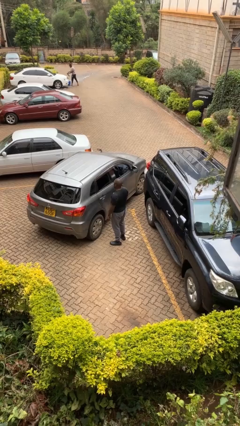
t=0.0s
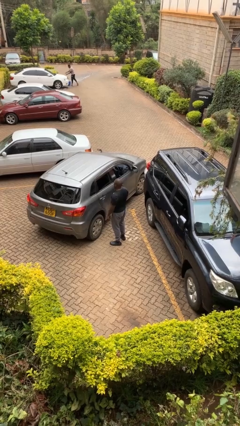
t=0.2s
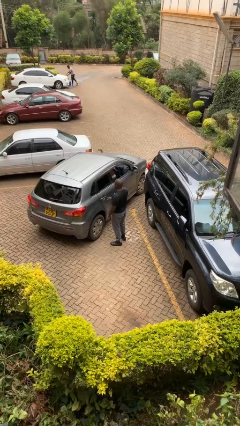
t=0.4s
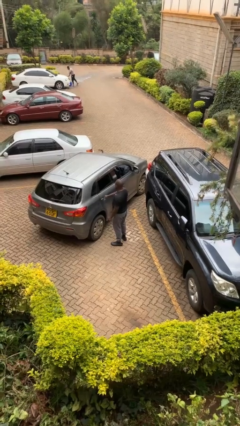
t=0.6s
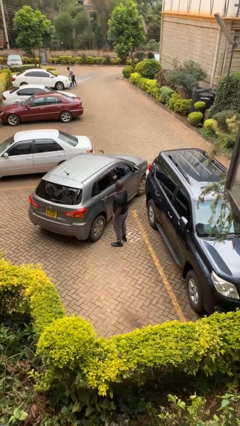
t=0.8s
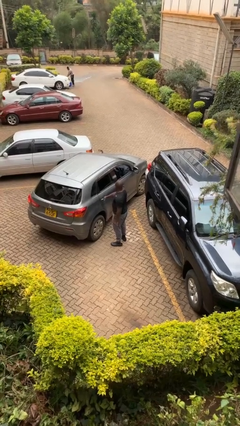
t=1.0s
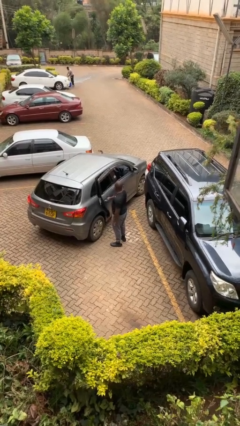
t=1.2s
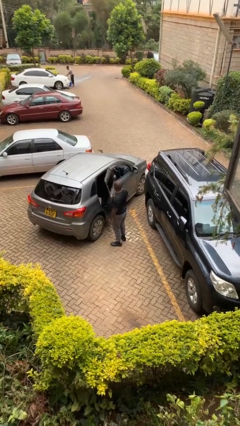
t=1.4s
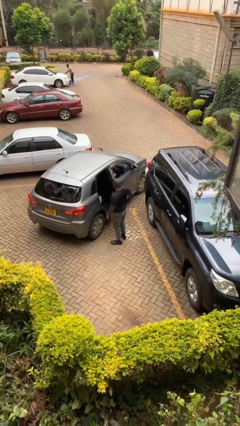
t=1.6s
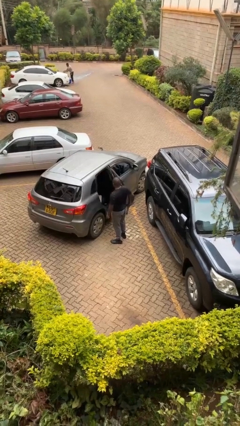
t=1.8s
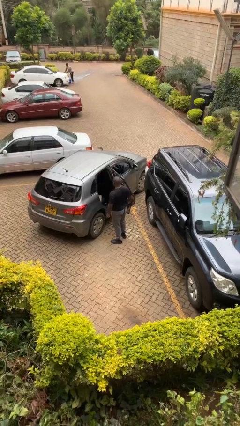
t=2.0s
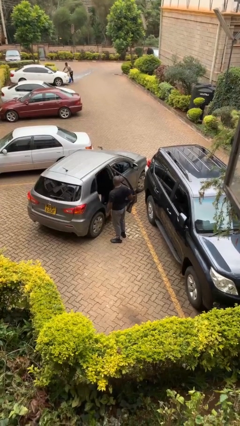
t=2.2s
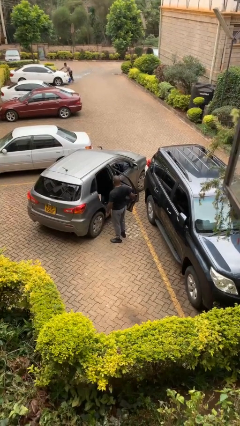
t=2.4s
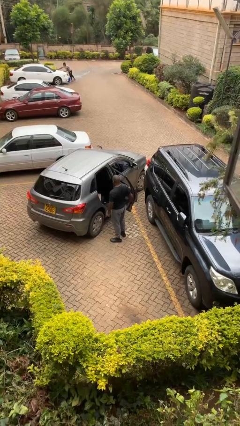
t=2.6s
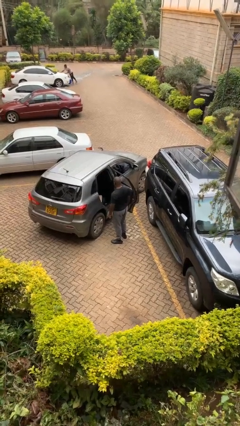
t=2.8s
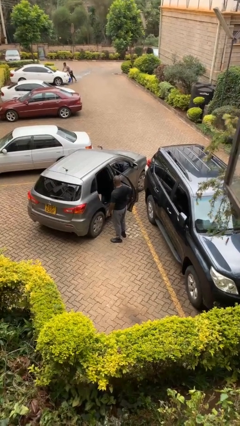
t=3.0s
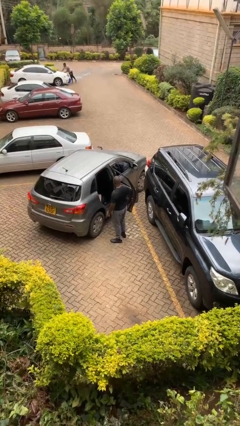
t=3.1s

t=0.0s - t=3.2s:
person opens car door

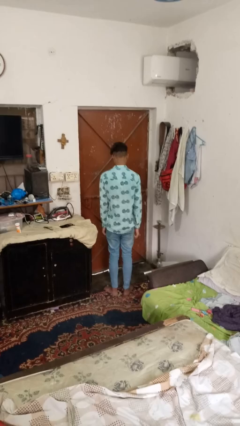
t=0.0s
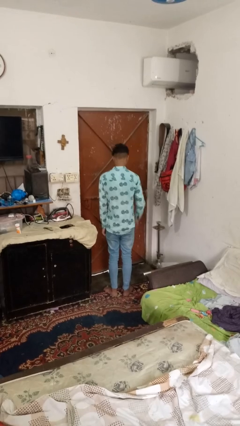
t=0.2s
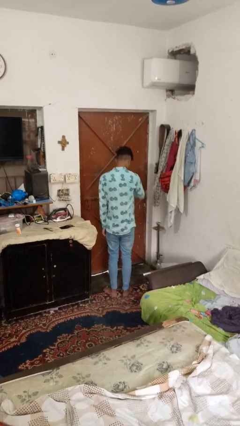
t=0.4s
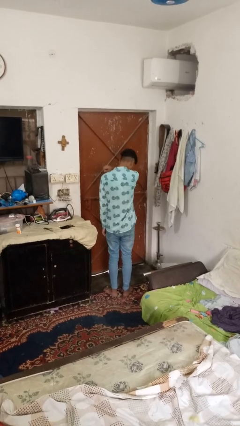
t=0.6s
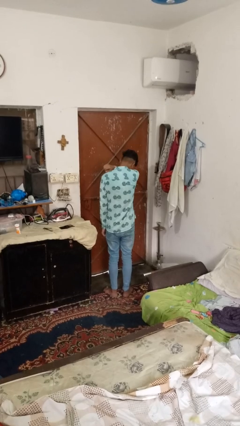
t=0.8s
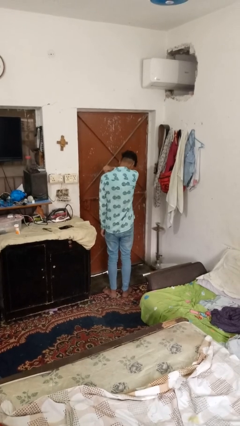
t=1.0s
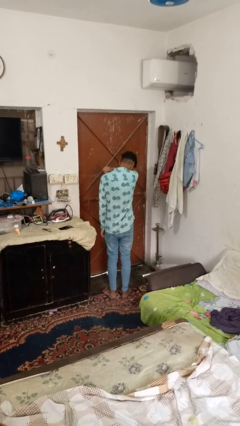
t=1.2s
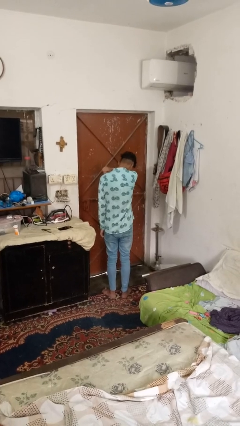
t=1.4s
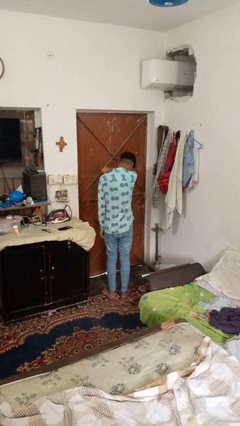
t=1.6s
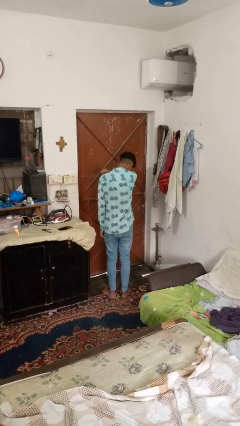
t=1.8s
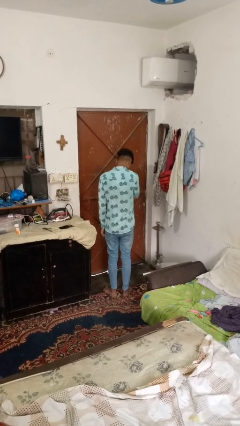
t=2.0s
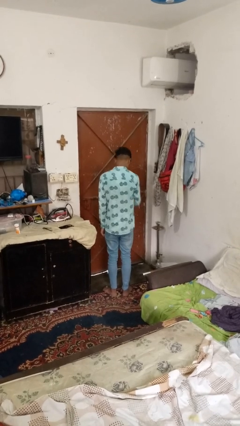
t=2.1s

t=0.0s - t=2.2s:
person sneezes into arm

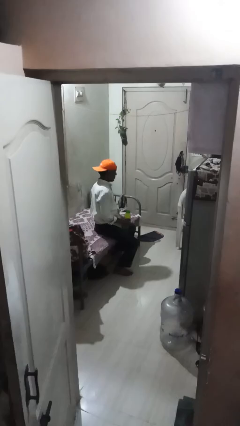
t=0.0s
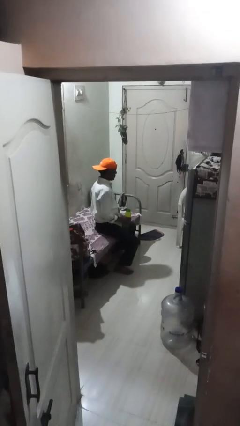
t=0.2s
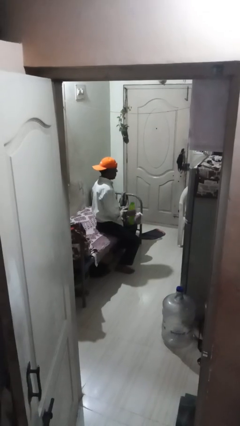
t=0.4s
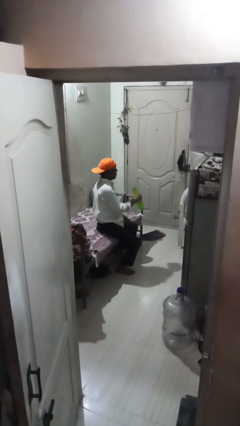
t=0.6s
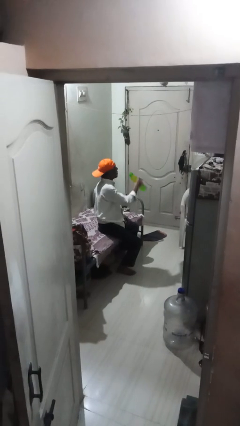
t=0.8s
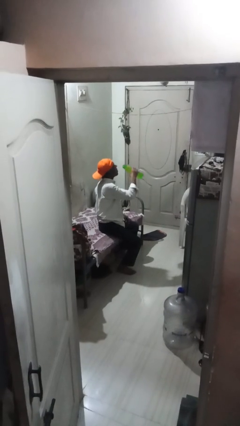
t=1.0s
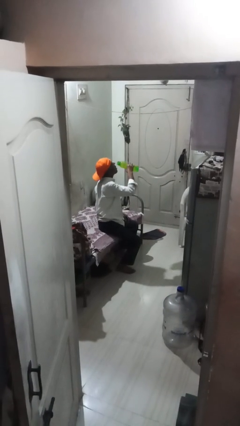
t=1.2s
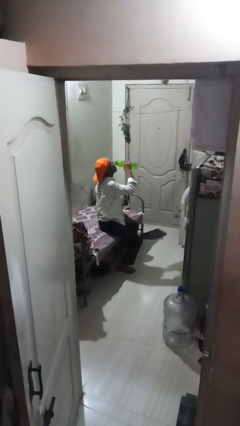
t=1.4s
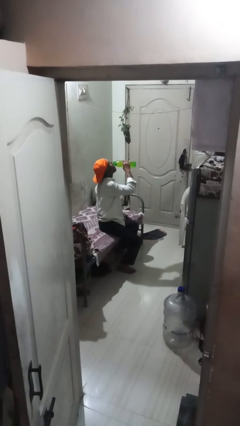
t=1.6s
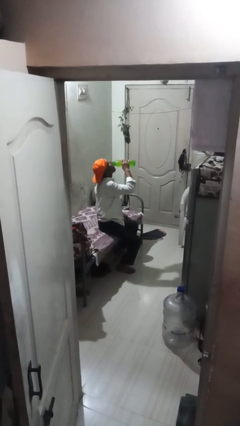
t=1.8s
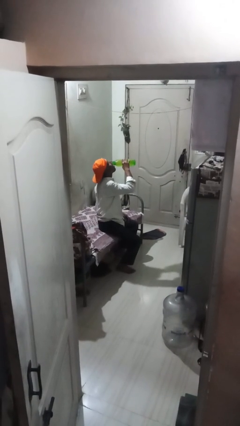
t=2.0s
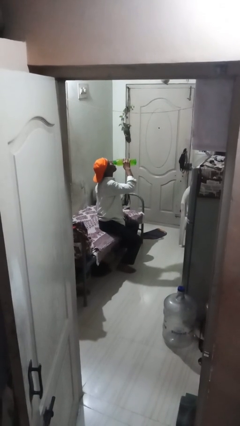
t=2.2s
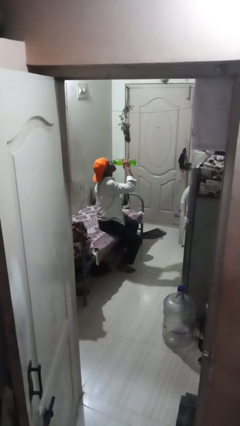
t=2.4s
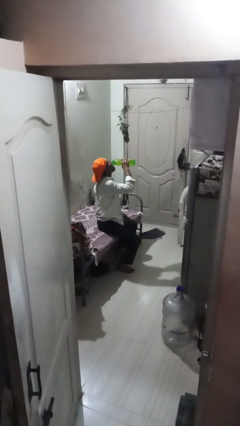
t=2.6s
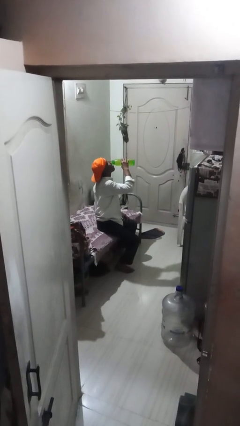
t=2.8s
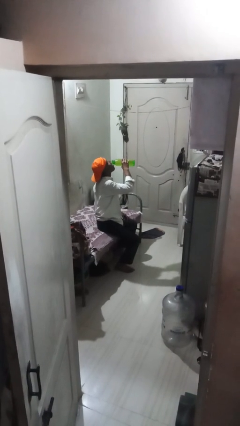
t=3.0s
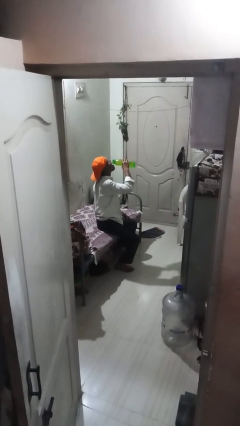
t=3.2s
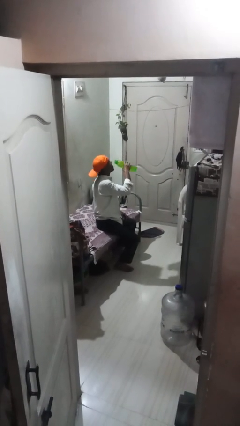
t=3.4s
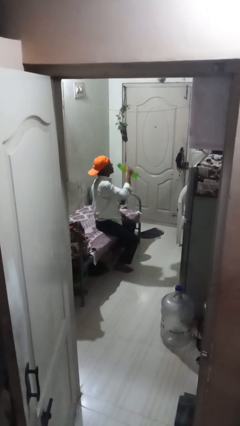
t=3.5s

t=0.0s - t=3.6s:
person drinks from bottle

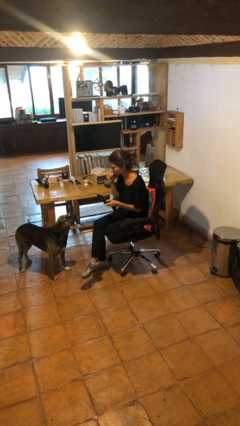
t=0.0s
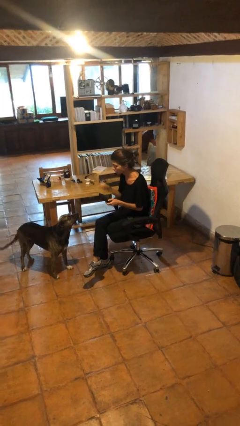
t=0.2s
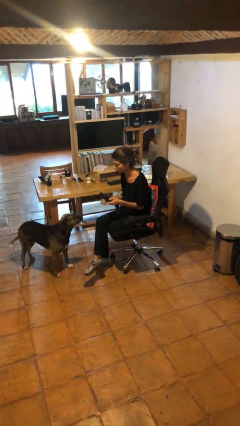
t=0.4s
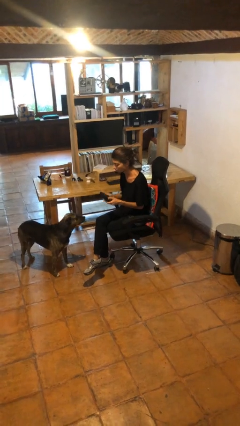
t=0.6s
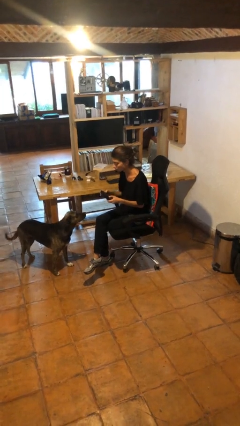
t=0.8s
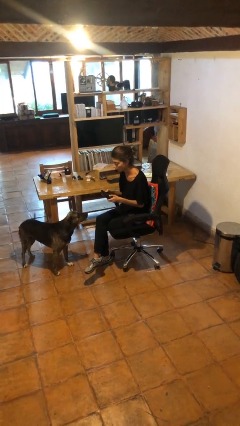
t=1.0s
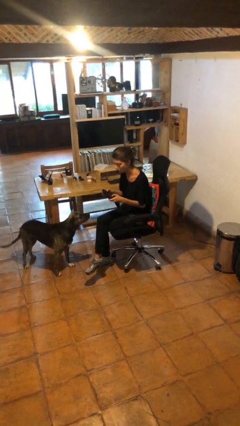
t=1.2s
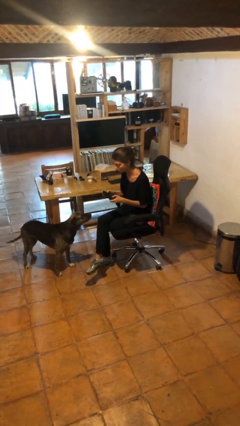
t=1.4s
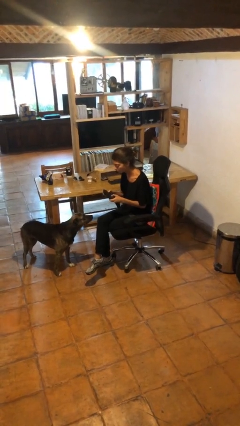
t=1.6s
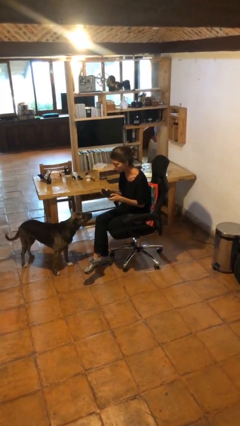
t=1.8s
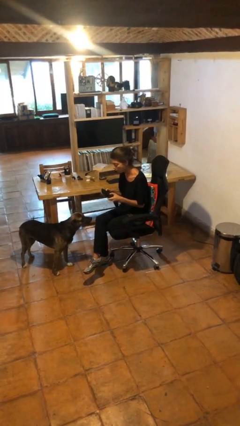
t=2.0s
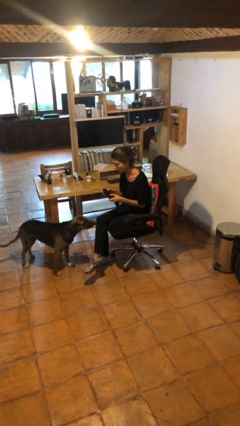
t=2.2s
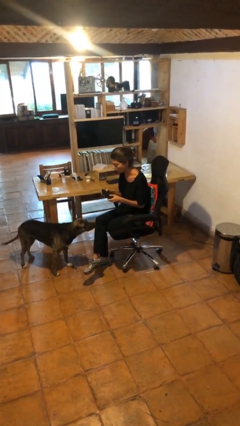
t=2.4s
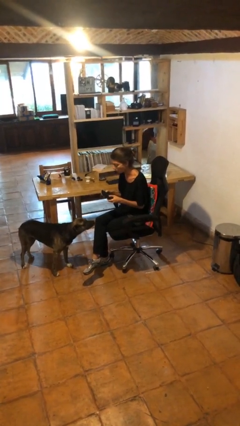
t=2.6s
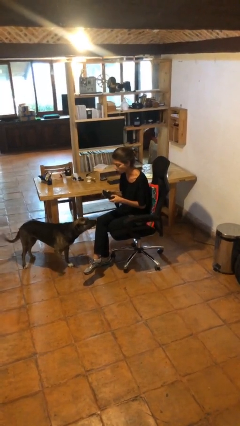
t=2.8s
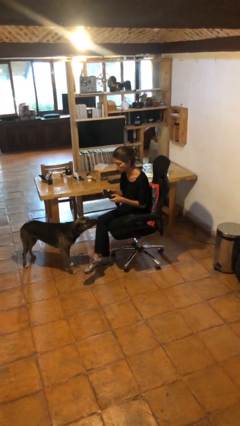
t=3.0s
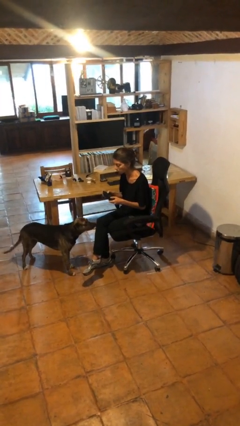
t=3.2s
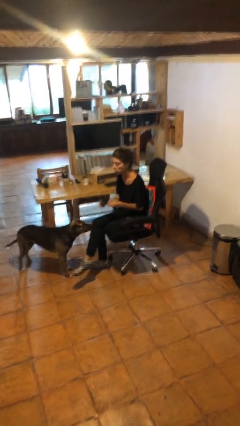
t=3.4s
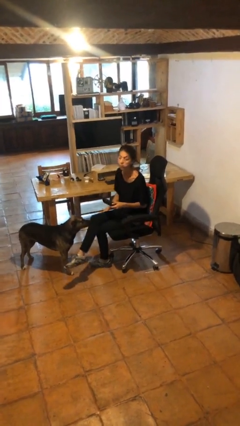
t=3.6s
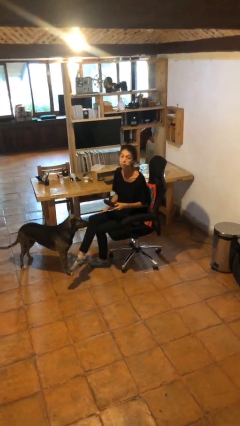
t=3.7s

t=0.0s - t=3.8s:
person interacts with handheld game

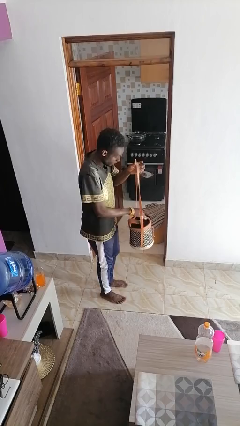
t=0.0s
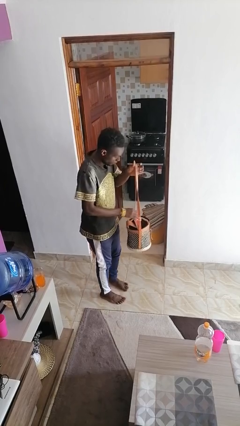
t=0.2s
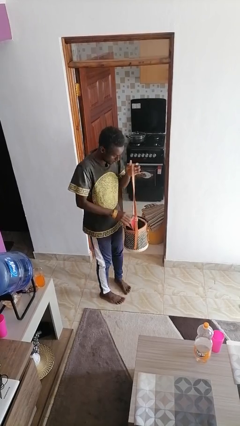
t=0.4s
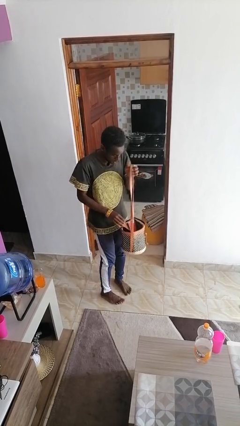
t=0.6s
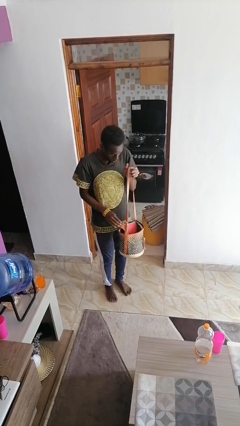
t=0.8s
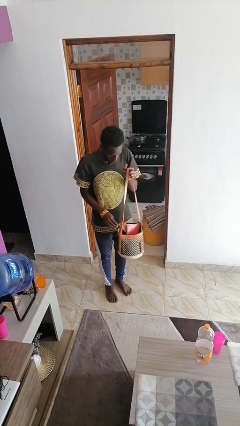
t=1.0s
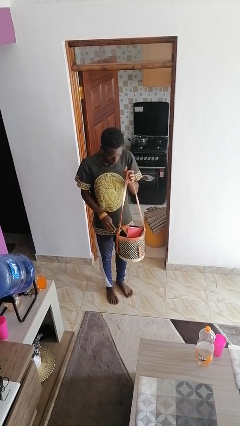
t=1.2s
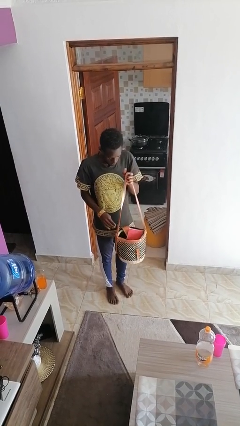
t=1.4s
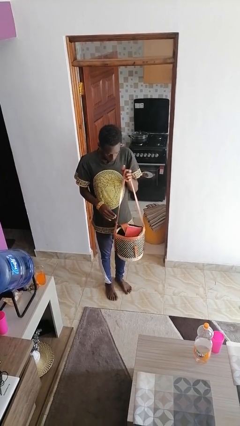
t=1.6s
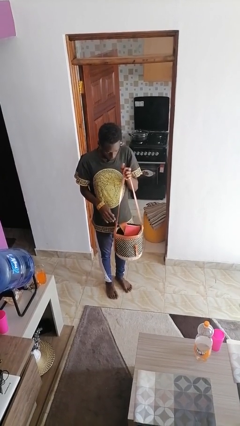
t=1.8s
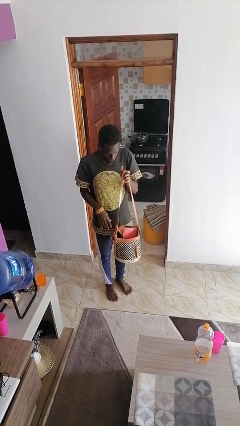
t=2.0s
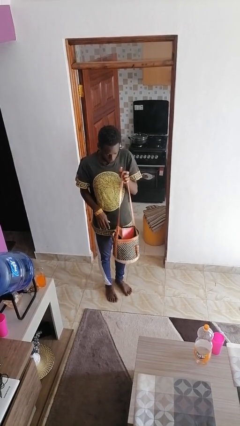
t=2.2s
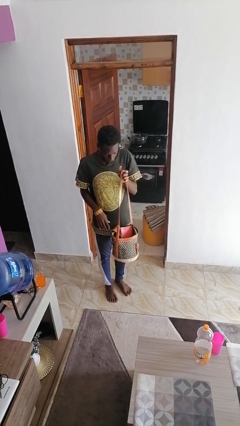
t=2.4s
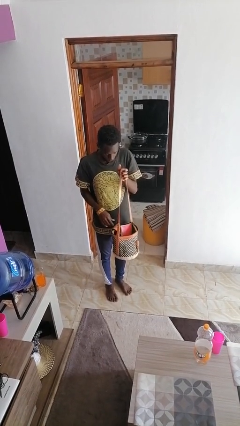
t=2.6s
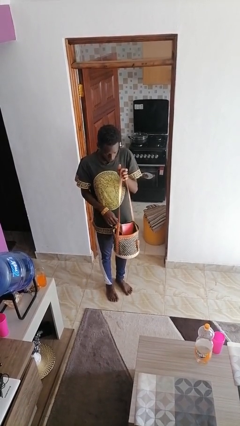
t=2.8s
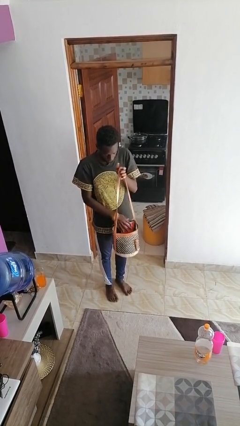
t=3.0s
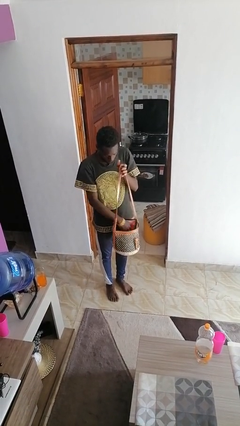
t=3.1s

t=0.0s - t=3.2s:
person puts object into purse

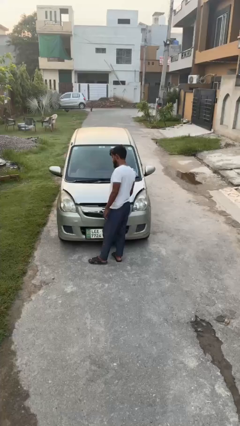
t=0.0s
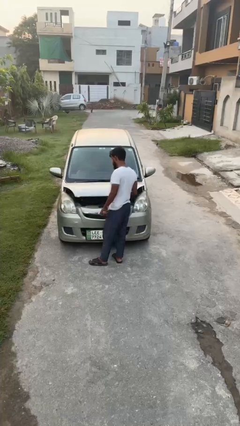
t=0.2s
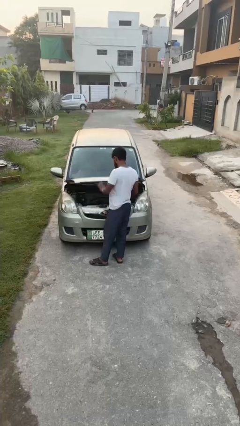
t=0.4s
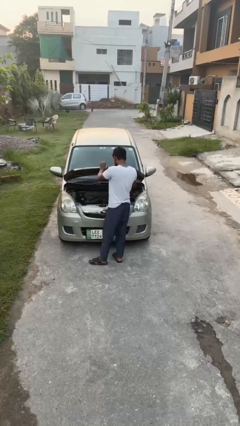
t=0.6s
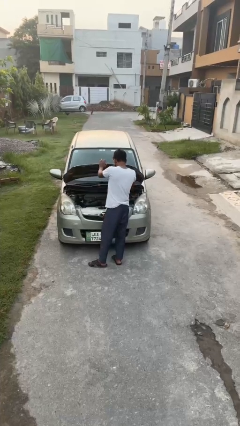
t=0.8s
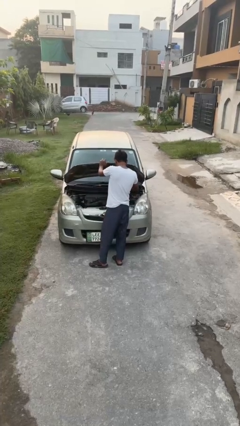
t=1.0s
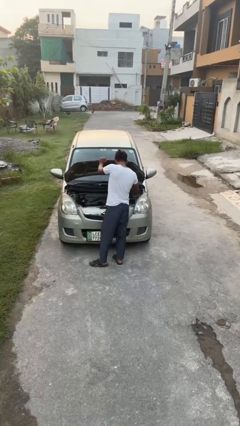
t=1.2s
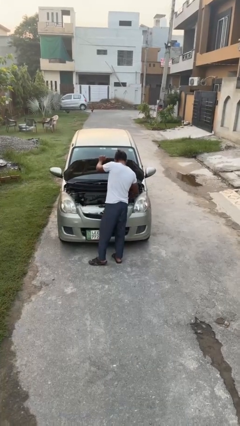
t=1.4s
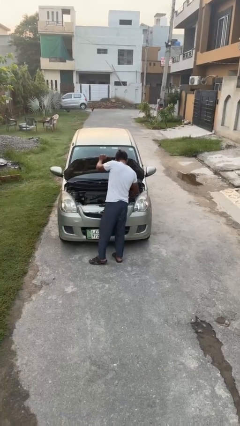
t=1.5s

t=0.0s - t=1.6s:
person opens car hood
